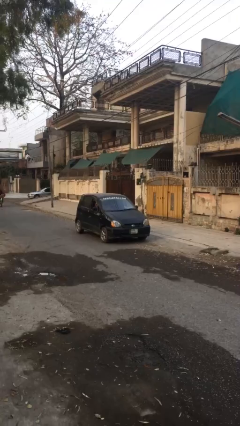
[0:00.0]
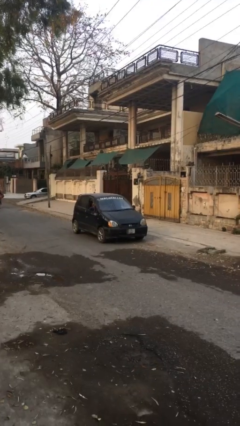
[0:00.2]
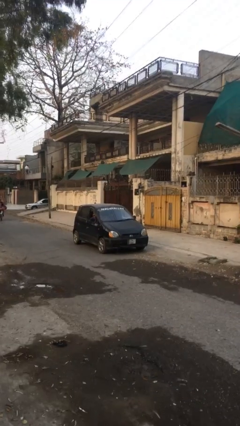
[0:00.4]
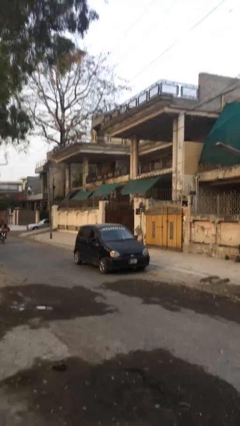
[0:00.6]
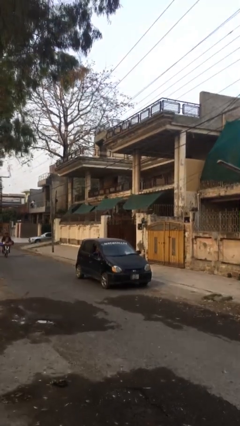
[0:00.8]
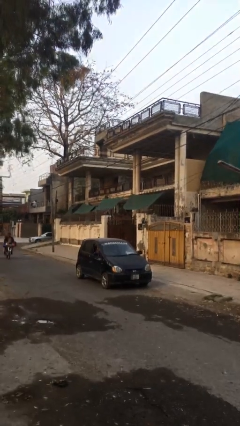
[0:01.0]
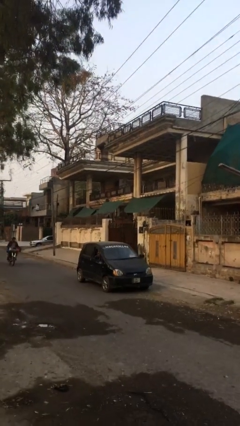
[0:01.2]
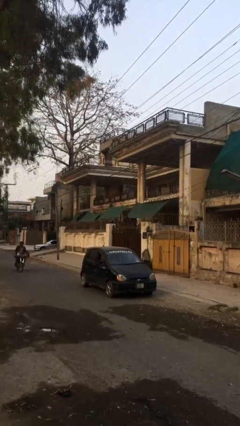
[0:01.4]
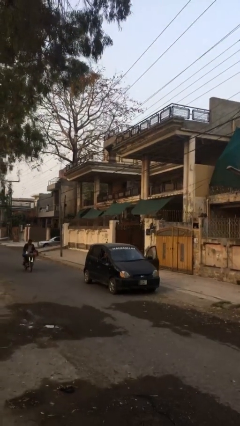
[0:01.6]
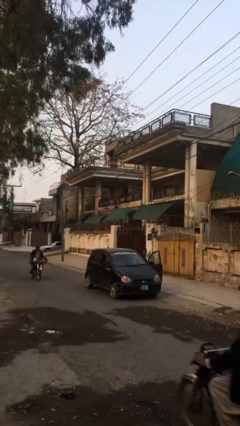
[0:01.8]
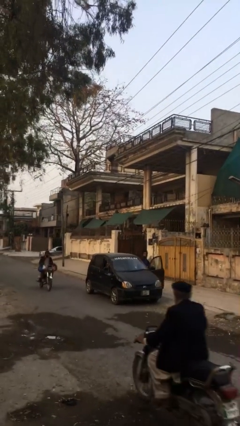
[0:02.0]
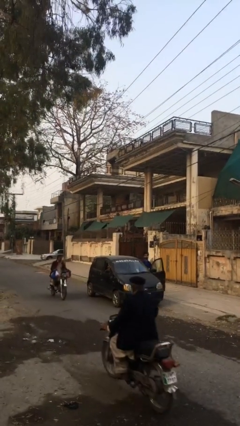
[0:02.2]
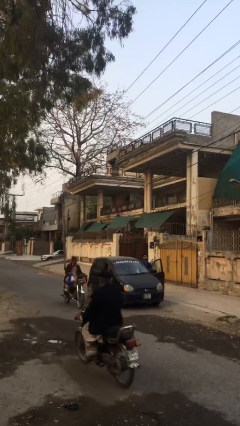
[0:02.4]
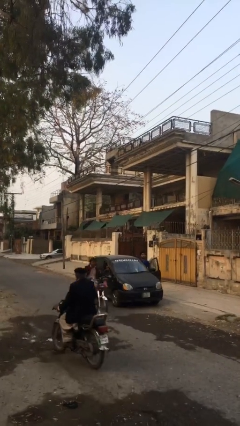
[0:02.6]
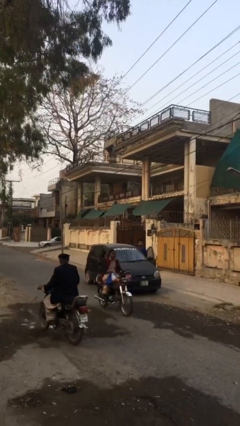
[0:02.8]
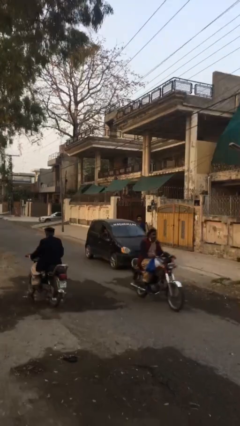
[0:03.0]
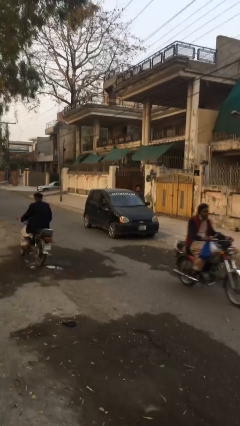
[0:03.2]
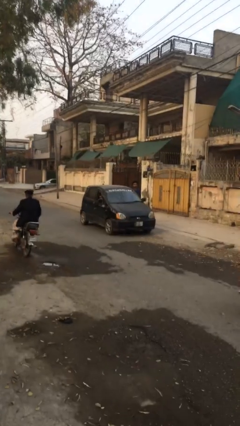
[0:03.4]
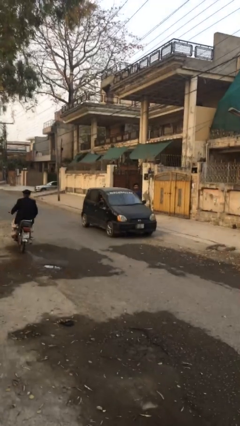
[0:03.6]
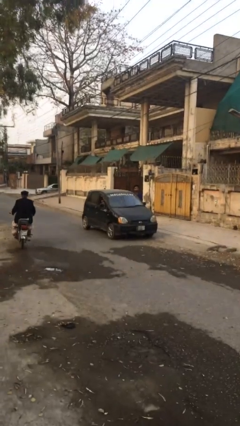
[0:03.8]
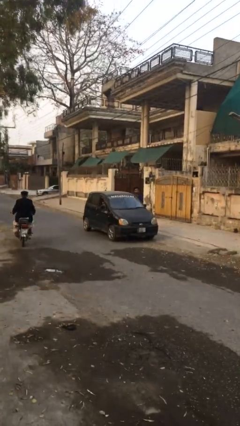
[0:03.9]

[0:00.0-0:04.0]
car drops off person

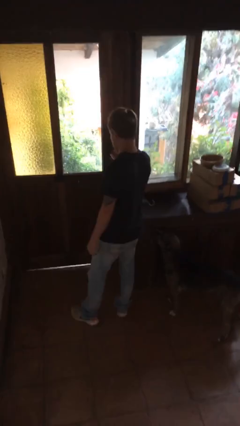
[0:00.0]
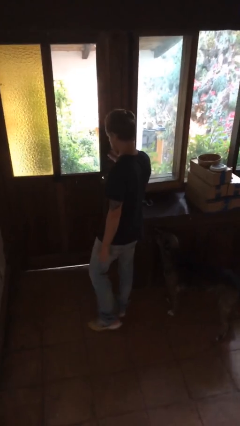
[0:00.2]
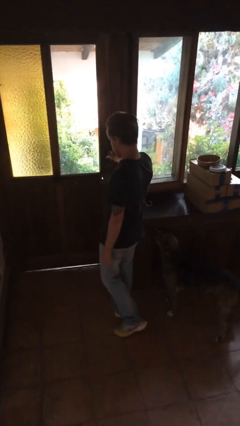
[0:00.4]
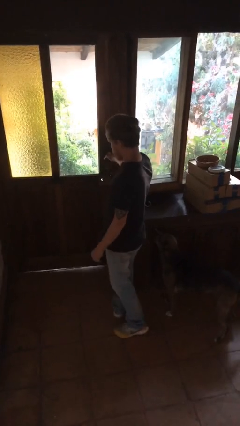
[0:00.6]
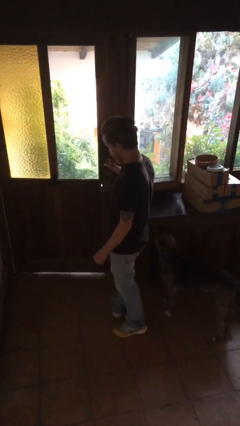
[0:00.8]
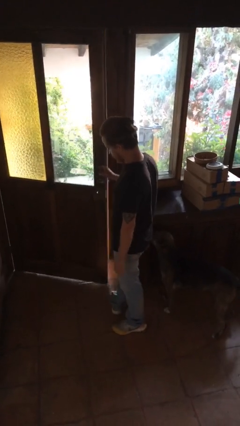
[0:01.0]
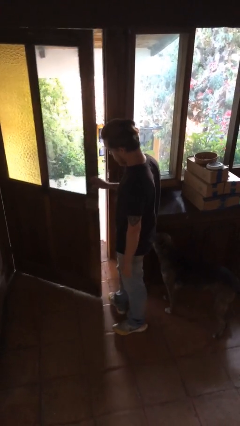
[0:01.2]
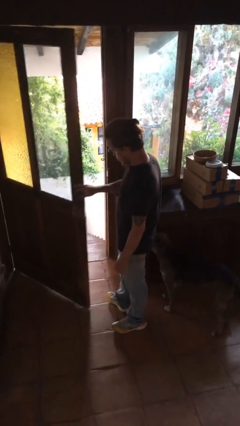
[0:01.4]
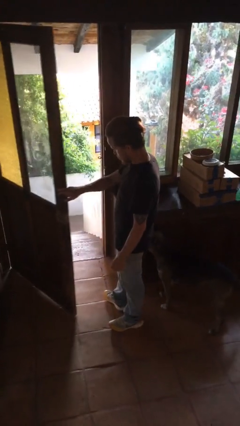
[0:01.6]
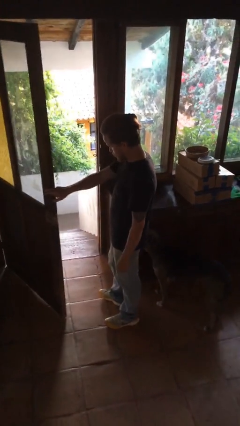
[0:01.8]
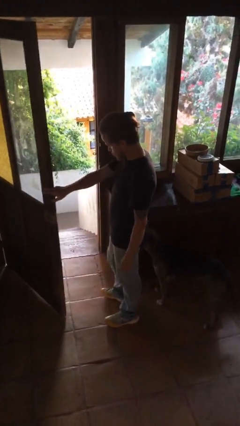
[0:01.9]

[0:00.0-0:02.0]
person opens facility door

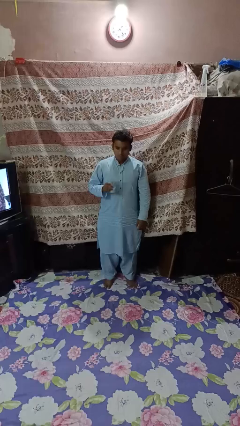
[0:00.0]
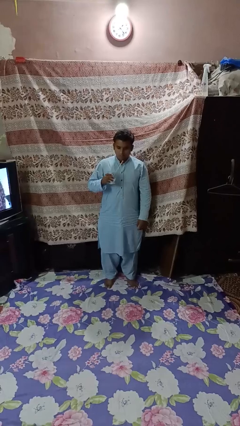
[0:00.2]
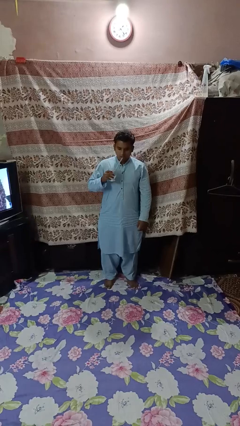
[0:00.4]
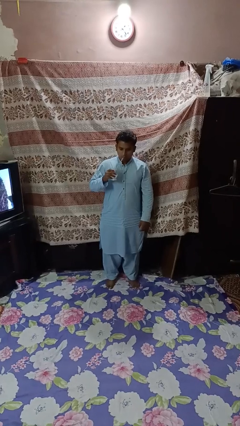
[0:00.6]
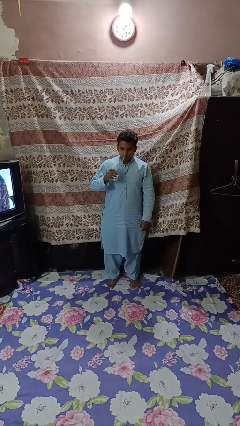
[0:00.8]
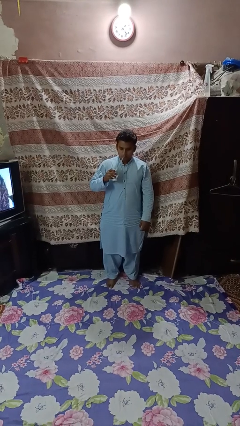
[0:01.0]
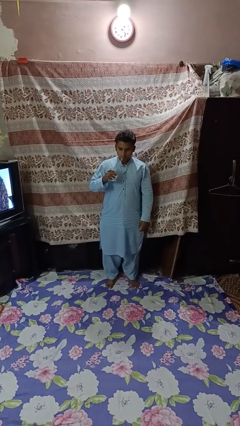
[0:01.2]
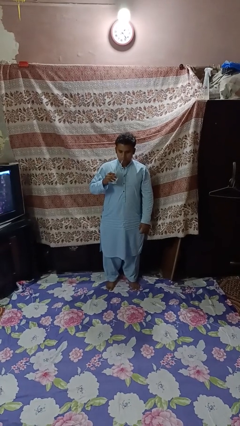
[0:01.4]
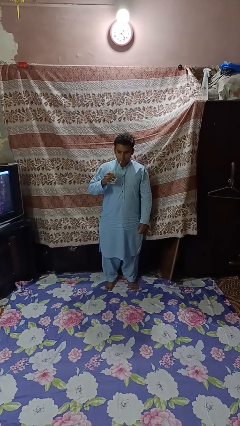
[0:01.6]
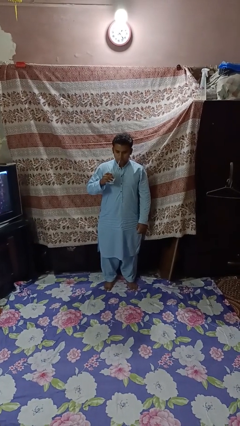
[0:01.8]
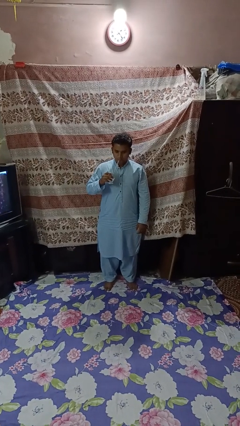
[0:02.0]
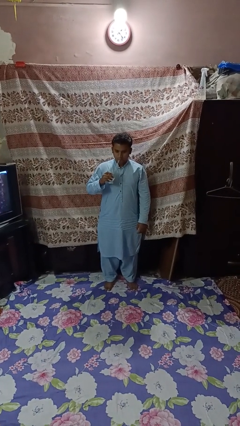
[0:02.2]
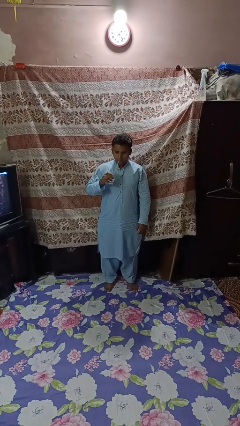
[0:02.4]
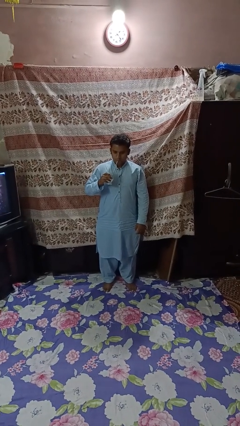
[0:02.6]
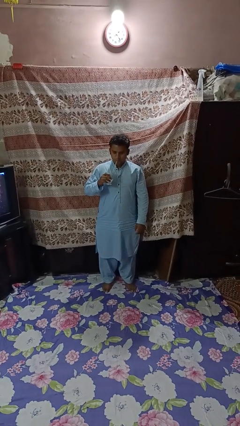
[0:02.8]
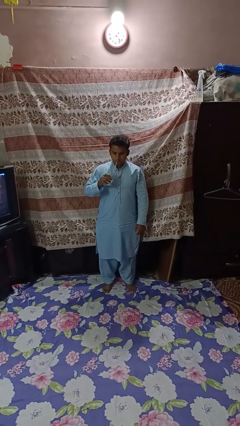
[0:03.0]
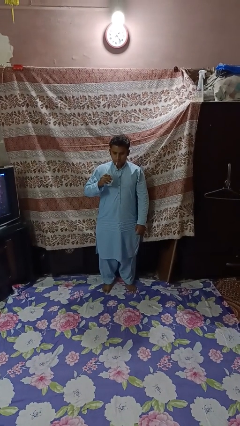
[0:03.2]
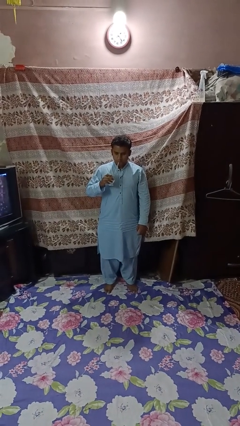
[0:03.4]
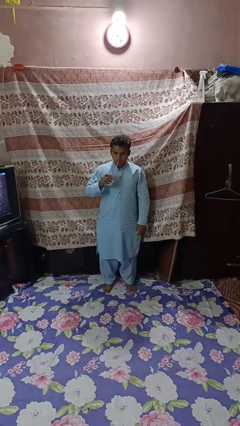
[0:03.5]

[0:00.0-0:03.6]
person drinks from straw

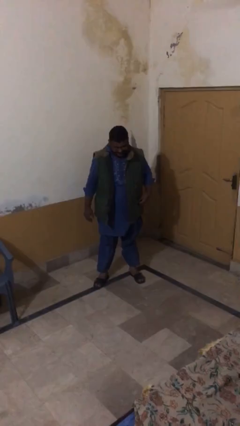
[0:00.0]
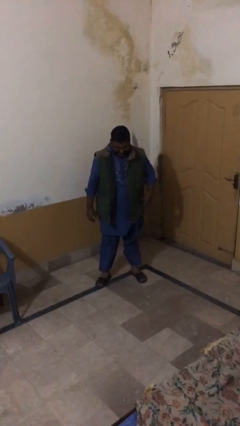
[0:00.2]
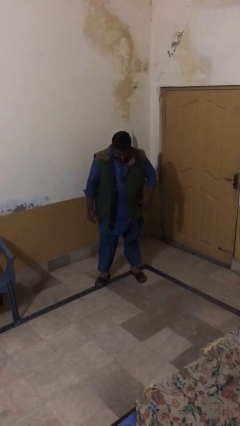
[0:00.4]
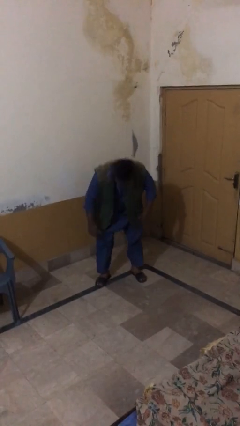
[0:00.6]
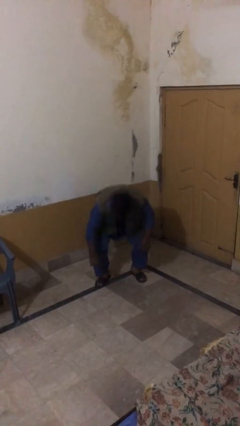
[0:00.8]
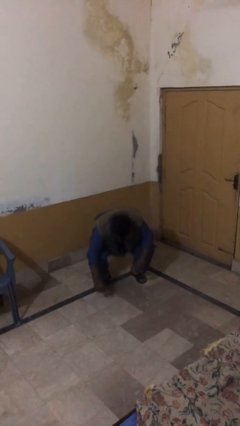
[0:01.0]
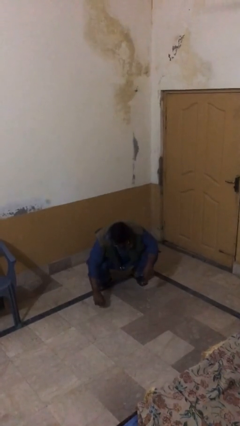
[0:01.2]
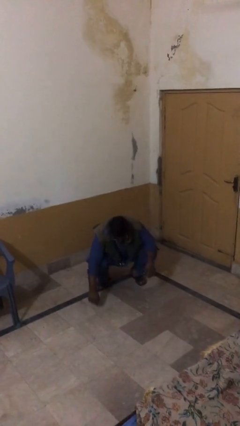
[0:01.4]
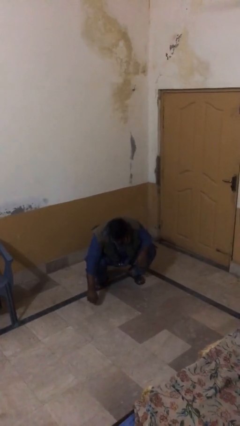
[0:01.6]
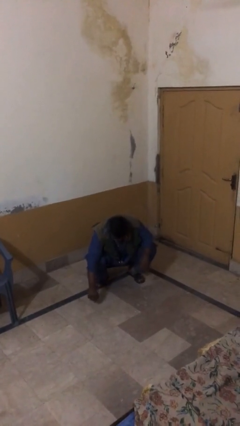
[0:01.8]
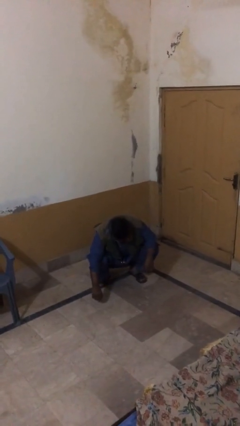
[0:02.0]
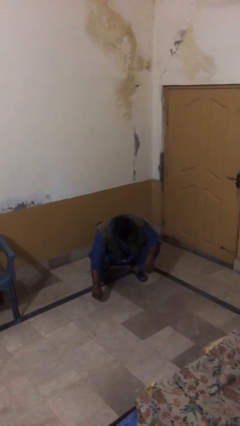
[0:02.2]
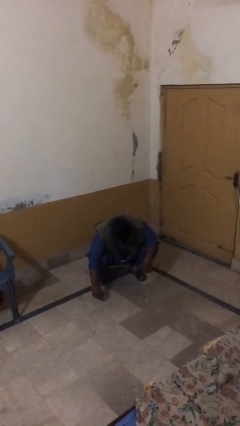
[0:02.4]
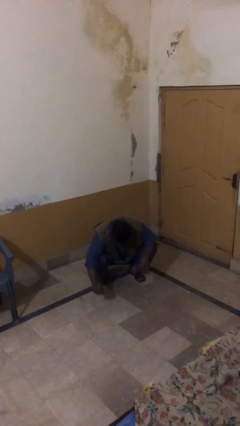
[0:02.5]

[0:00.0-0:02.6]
person sits down

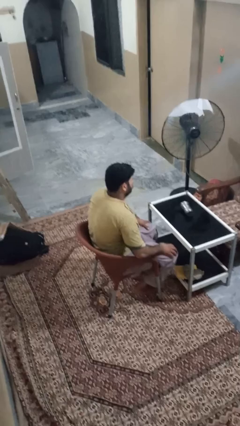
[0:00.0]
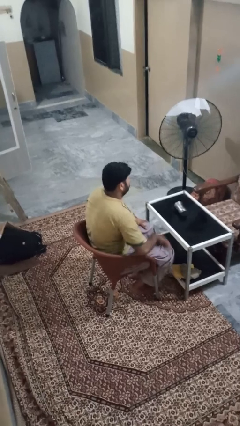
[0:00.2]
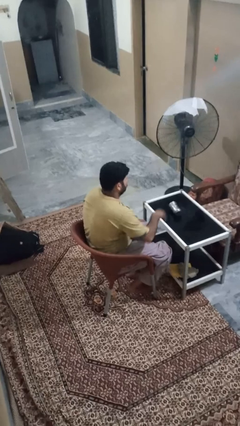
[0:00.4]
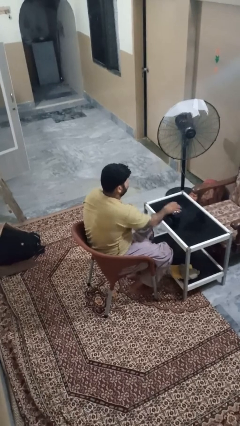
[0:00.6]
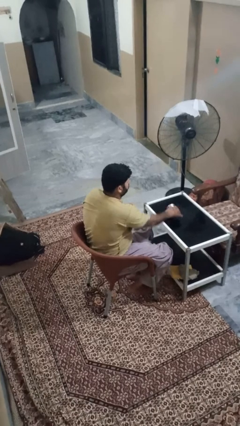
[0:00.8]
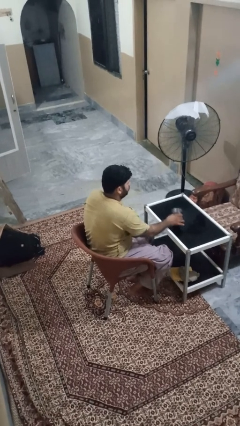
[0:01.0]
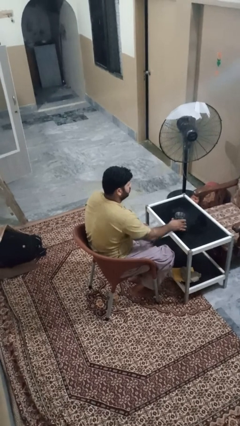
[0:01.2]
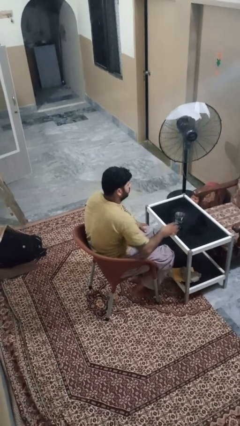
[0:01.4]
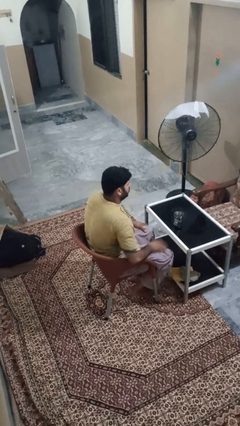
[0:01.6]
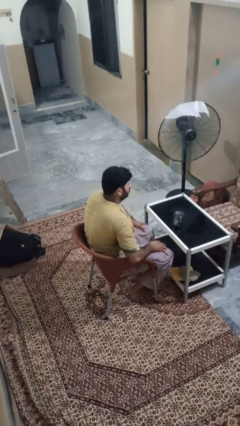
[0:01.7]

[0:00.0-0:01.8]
person sets upright glass

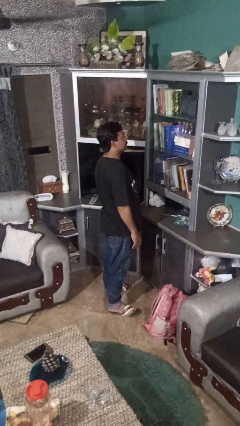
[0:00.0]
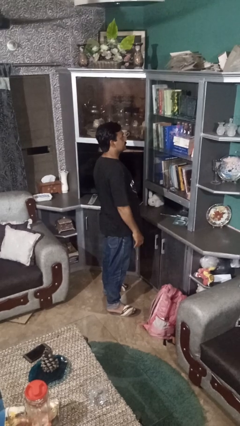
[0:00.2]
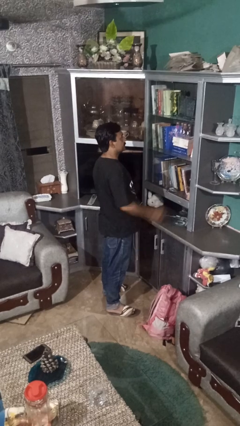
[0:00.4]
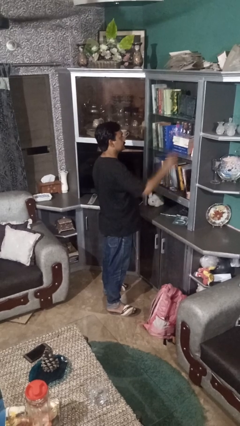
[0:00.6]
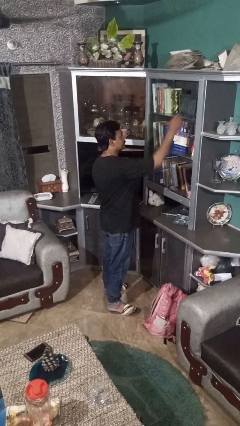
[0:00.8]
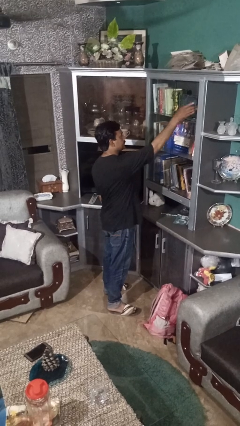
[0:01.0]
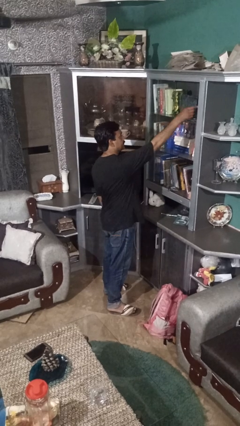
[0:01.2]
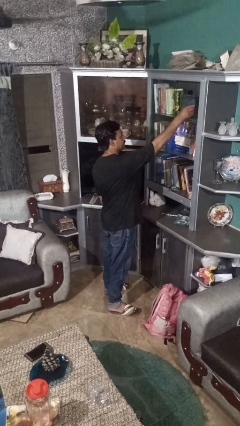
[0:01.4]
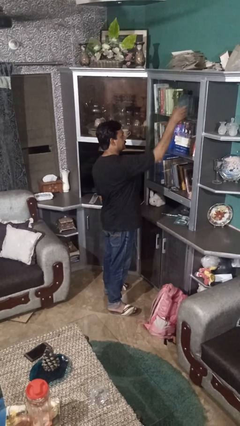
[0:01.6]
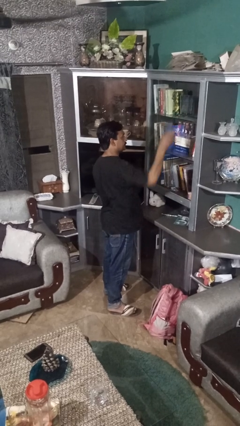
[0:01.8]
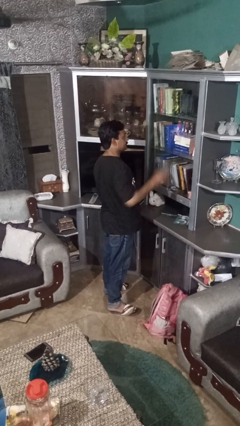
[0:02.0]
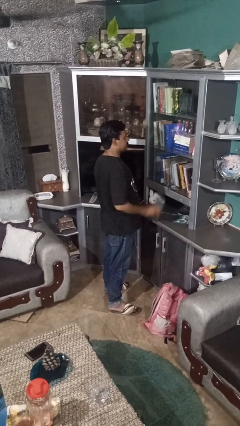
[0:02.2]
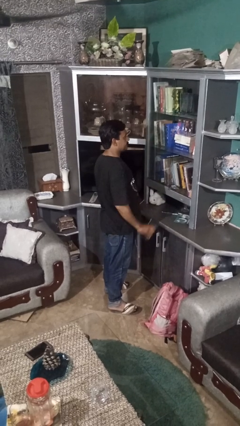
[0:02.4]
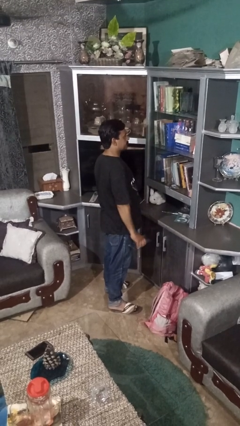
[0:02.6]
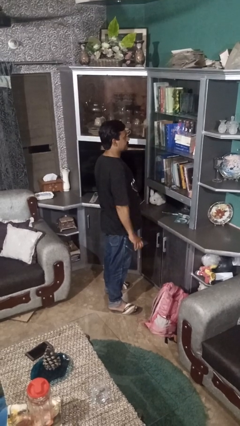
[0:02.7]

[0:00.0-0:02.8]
person picks up object from shelf

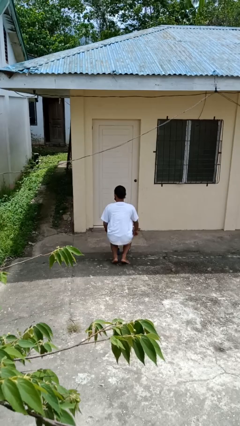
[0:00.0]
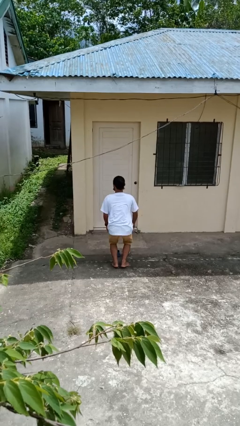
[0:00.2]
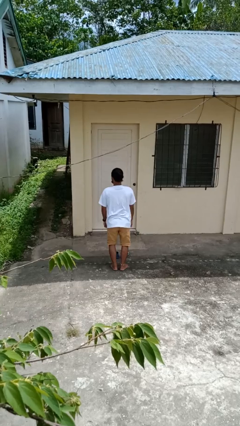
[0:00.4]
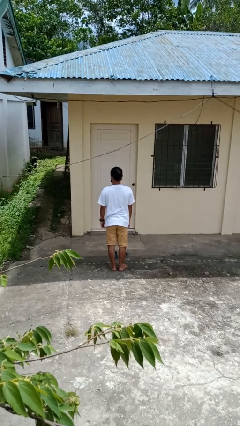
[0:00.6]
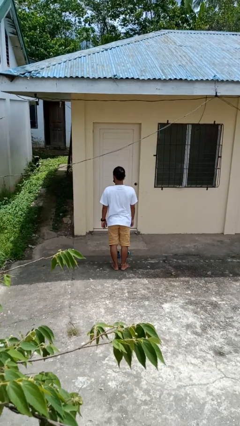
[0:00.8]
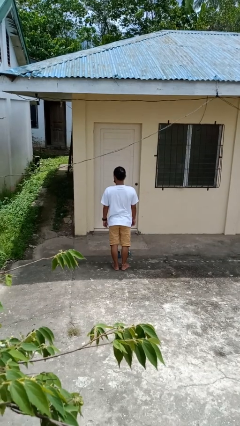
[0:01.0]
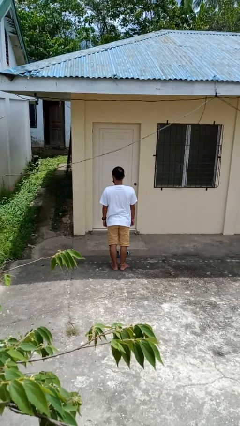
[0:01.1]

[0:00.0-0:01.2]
person stands up from floor
